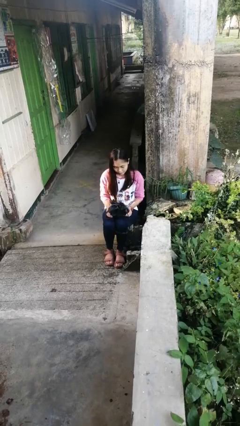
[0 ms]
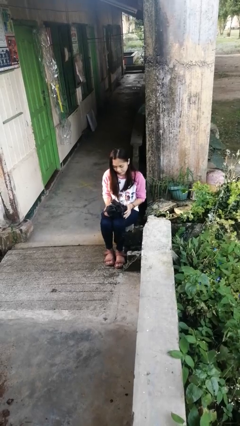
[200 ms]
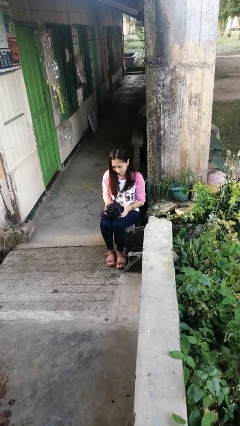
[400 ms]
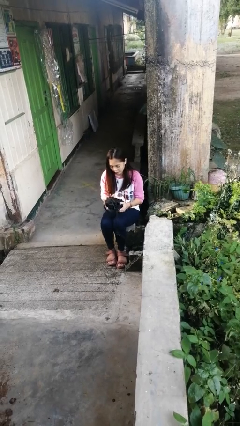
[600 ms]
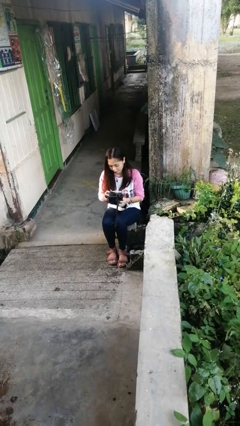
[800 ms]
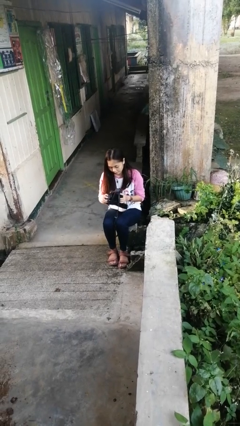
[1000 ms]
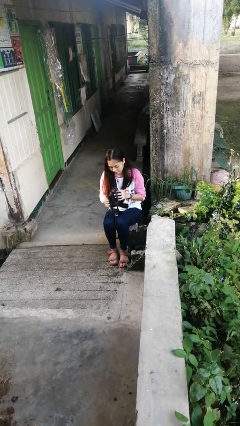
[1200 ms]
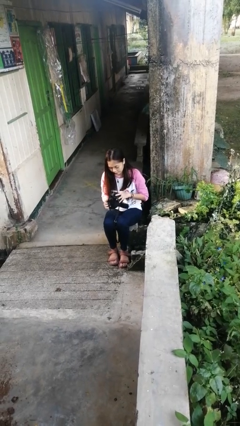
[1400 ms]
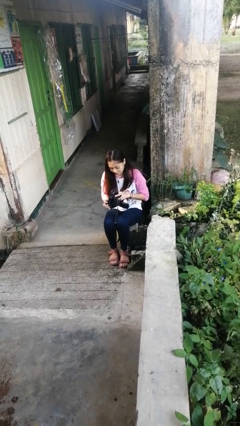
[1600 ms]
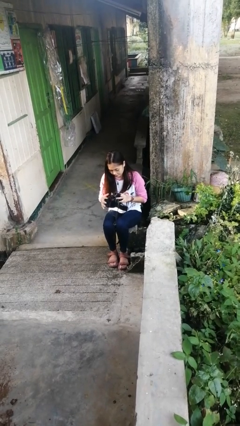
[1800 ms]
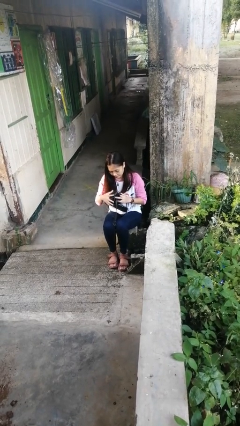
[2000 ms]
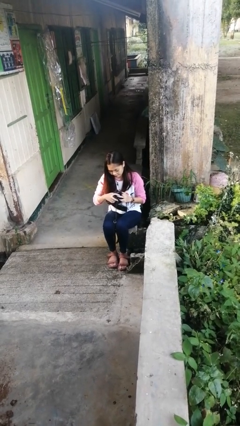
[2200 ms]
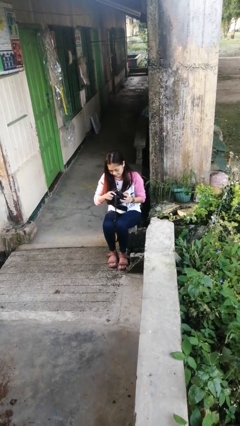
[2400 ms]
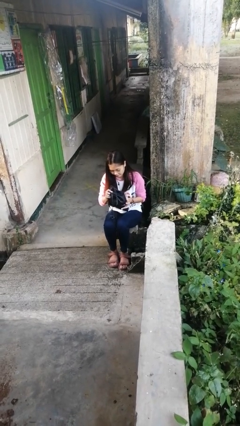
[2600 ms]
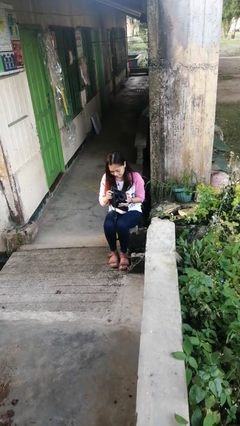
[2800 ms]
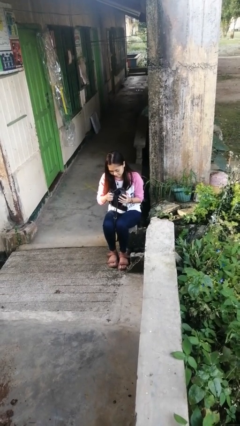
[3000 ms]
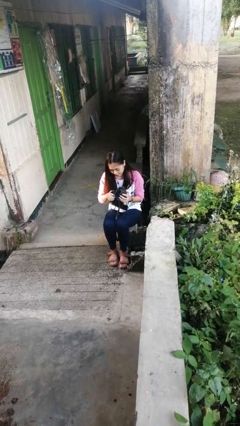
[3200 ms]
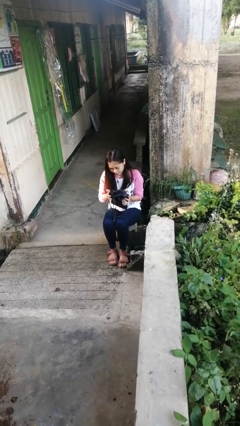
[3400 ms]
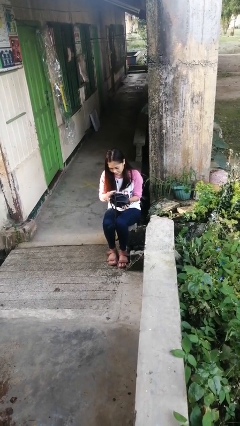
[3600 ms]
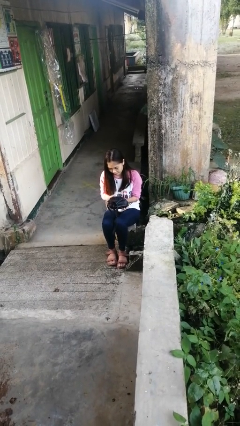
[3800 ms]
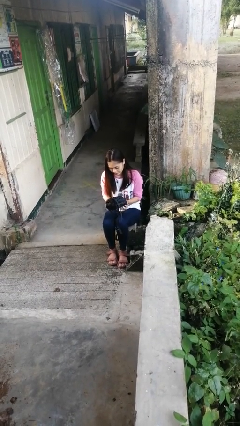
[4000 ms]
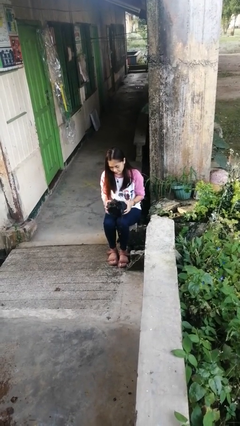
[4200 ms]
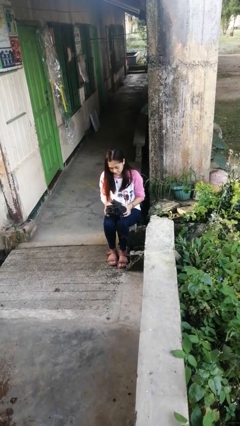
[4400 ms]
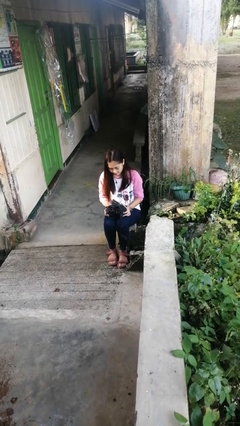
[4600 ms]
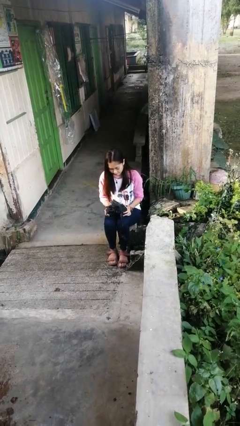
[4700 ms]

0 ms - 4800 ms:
person squeezes object

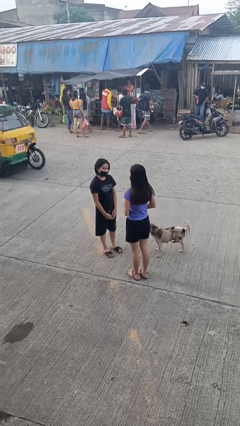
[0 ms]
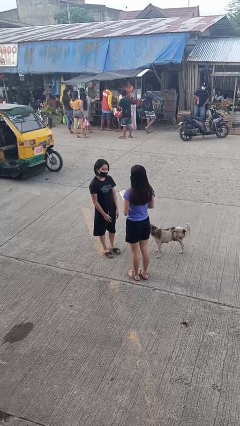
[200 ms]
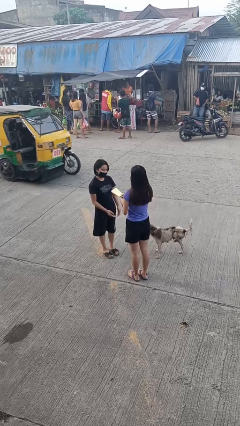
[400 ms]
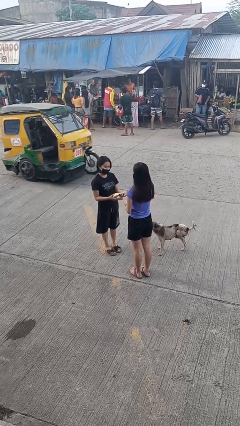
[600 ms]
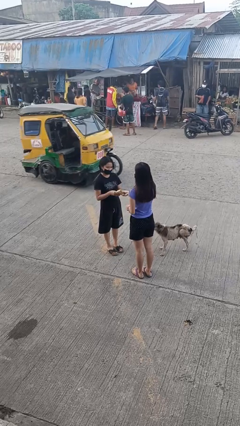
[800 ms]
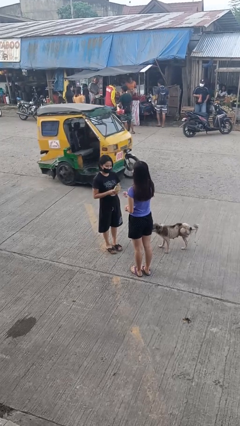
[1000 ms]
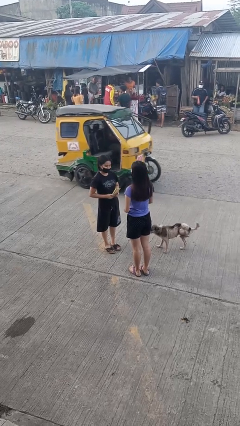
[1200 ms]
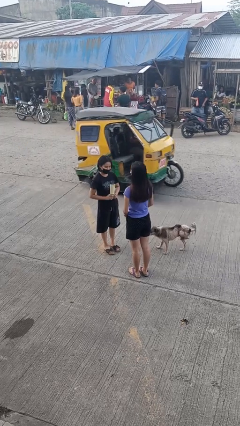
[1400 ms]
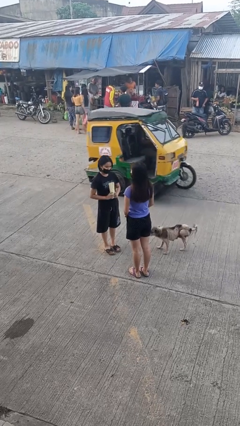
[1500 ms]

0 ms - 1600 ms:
person transfers object to person

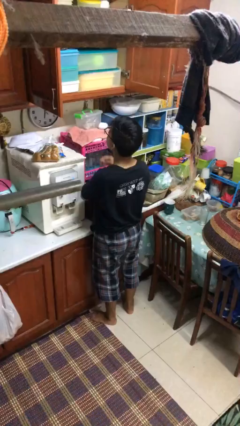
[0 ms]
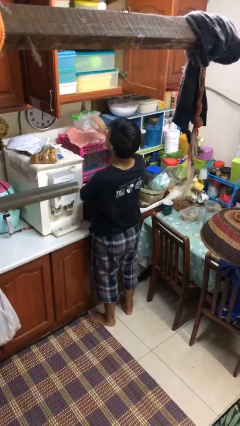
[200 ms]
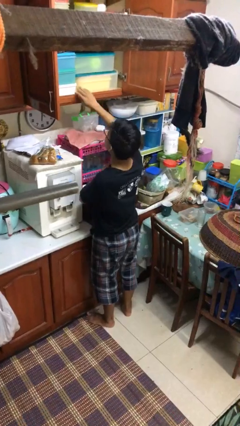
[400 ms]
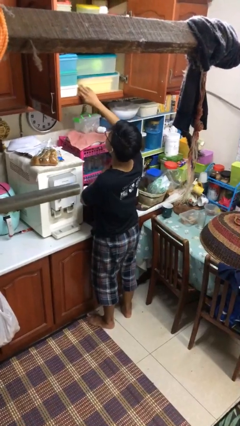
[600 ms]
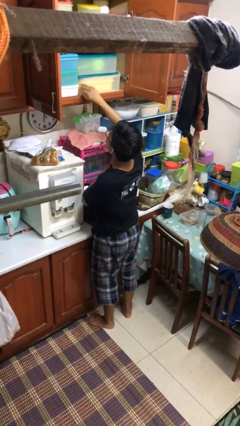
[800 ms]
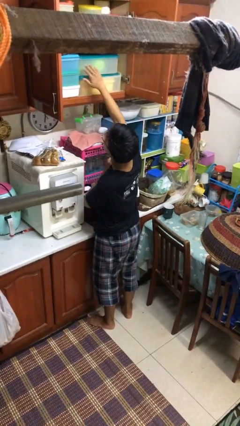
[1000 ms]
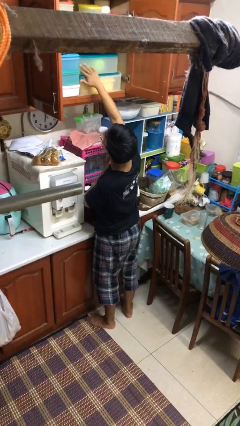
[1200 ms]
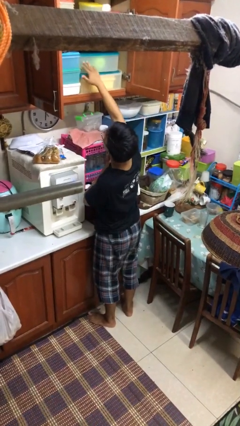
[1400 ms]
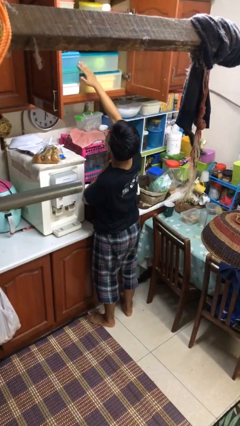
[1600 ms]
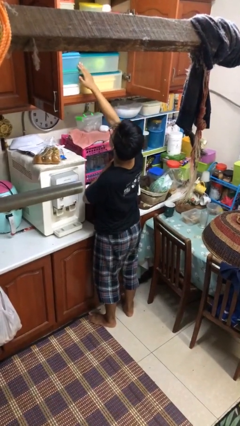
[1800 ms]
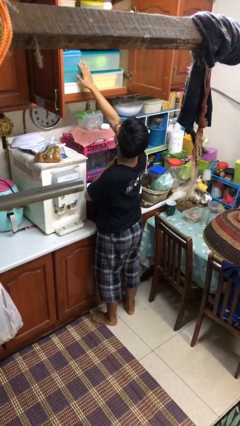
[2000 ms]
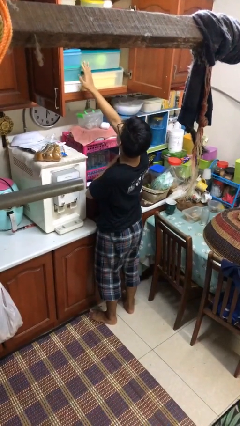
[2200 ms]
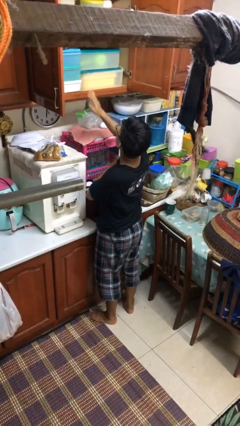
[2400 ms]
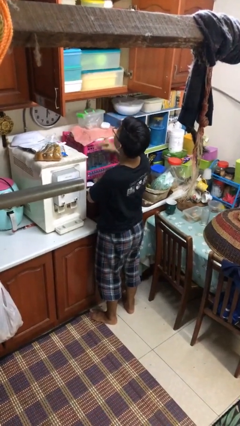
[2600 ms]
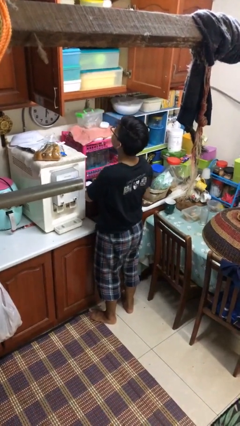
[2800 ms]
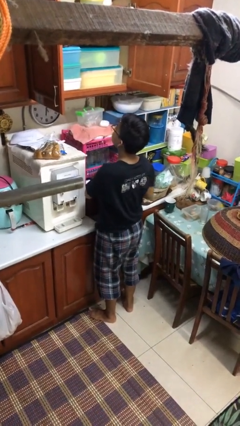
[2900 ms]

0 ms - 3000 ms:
person searches in kitchen drawer

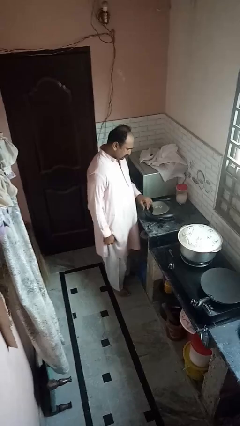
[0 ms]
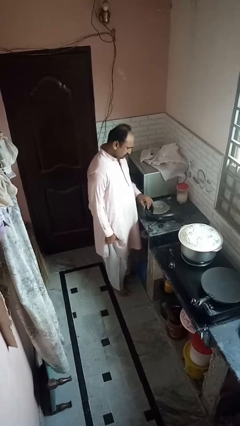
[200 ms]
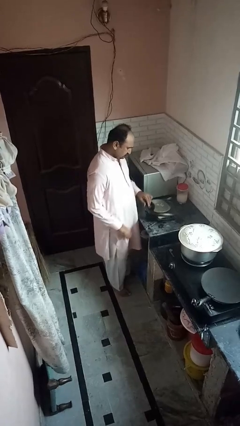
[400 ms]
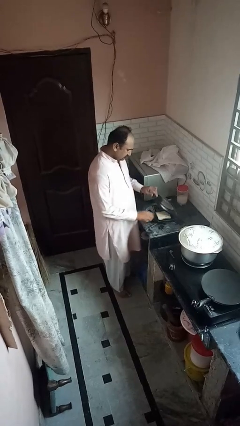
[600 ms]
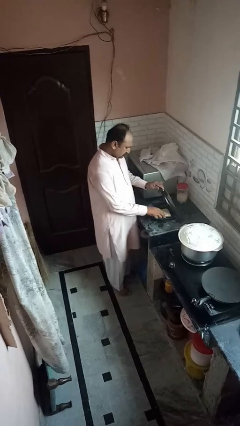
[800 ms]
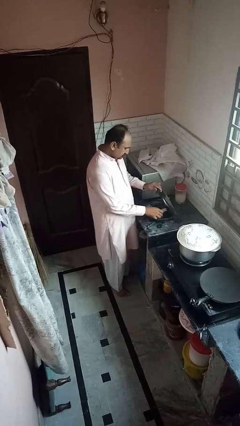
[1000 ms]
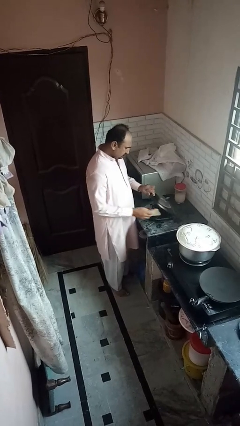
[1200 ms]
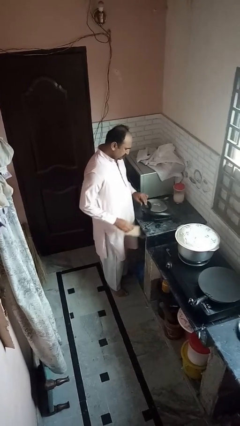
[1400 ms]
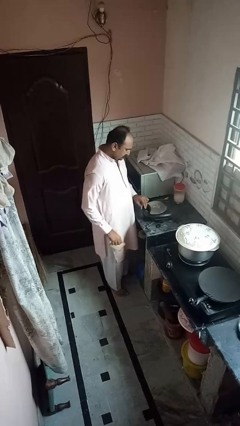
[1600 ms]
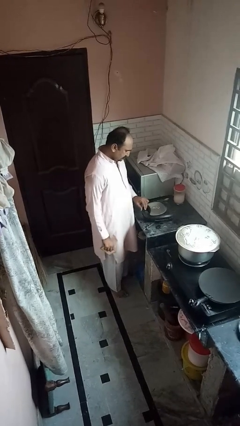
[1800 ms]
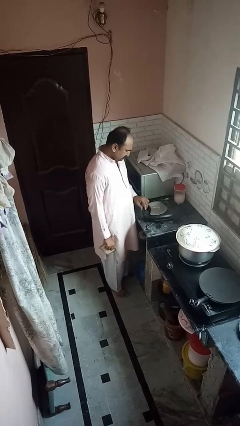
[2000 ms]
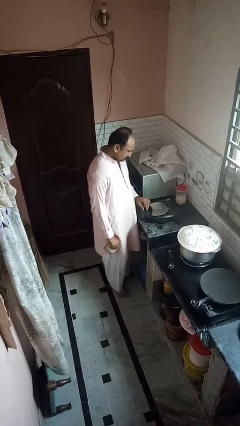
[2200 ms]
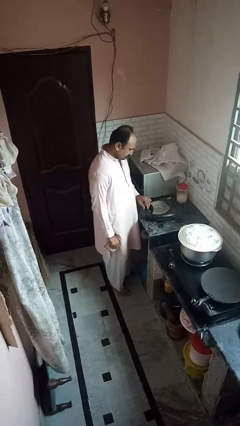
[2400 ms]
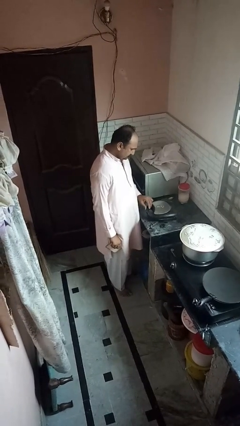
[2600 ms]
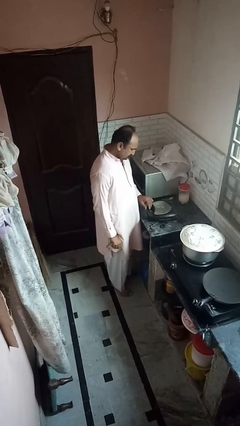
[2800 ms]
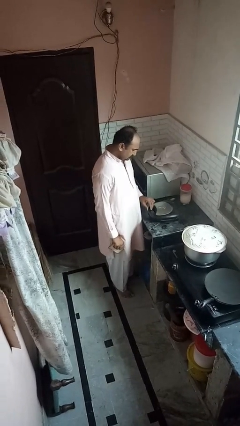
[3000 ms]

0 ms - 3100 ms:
person takes object from toaster

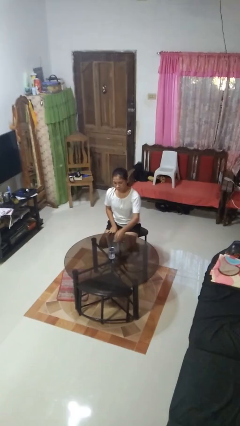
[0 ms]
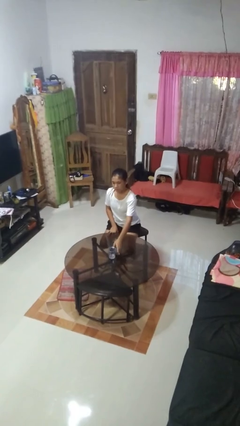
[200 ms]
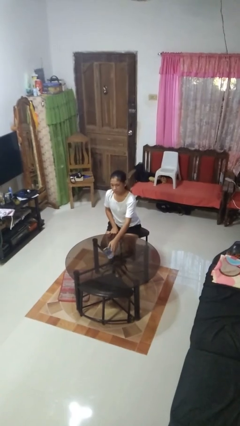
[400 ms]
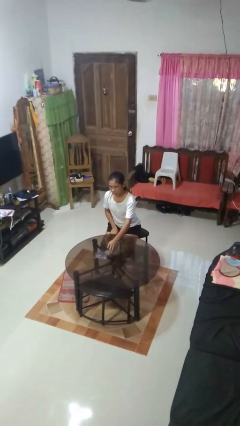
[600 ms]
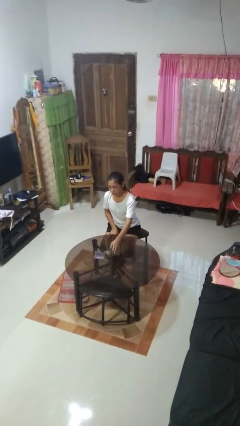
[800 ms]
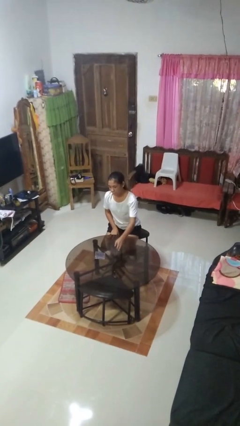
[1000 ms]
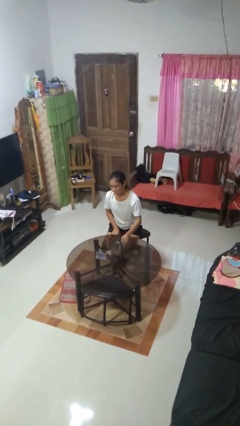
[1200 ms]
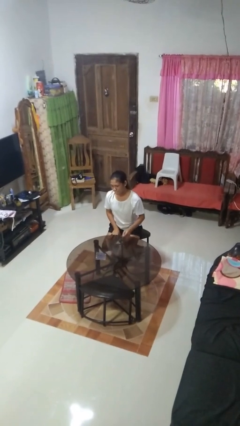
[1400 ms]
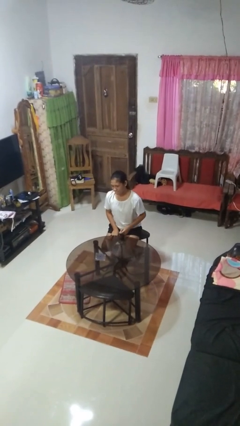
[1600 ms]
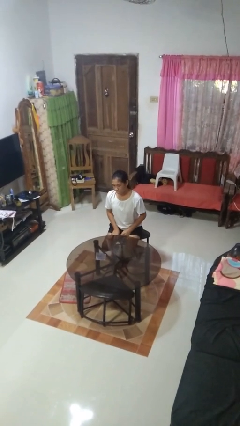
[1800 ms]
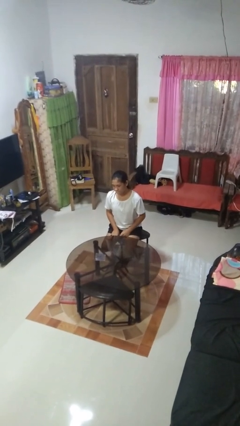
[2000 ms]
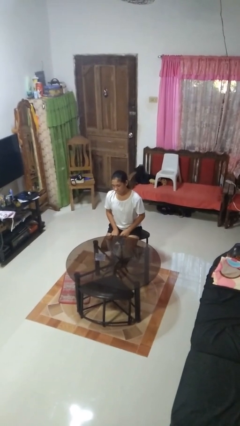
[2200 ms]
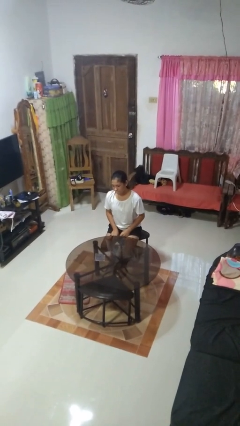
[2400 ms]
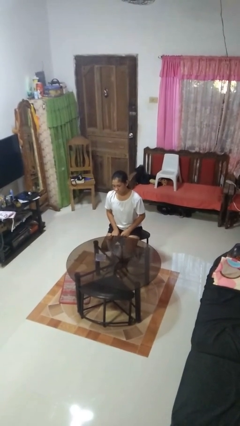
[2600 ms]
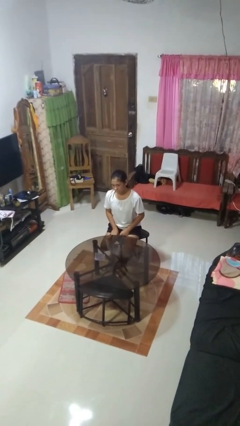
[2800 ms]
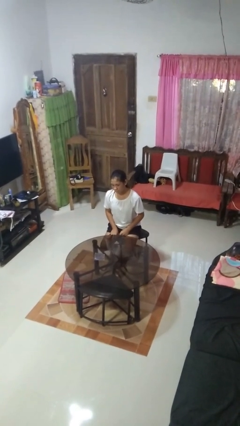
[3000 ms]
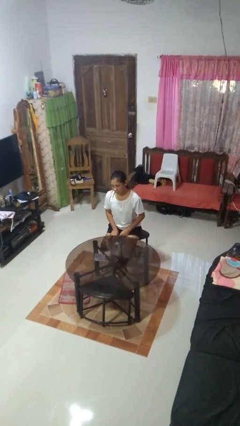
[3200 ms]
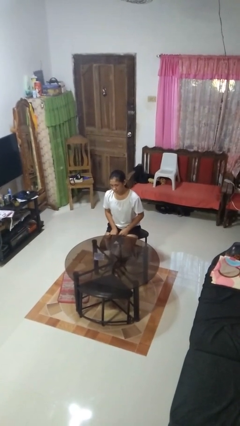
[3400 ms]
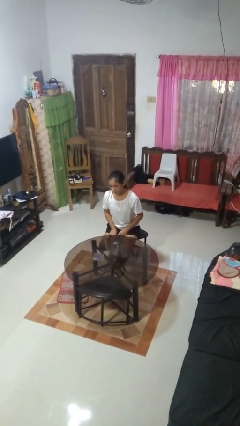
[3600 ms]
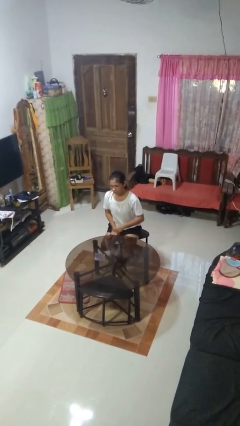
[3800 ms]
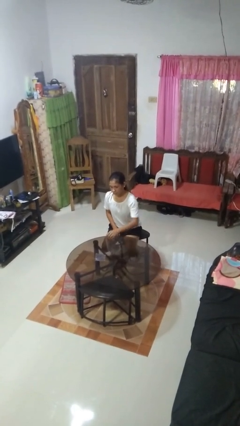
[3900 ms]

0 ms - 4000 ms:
person spills on table

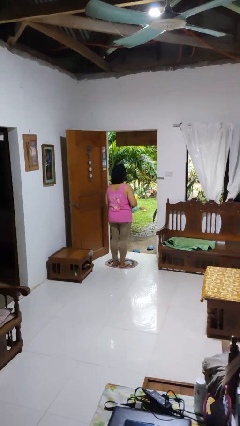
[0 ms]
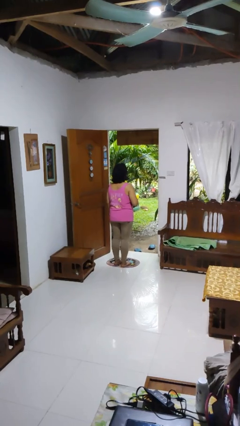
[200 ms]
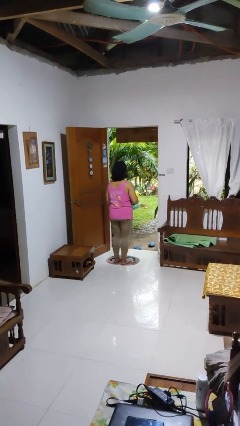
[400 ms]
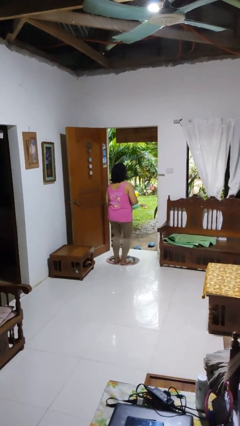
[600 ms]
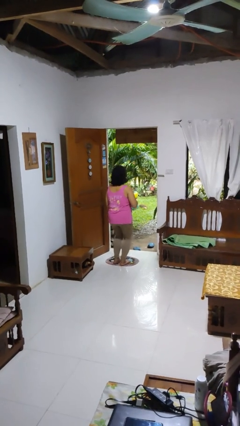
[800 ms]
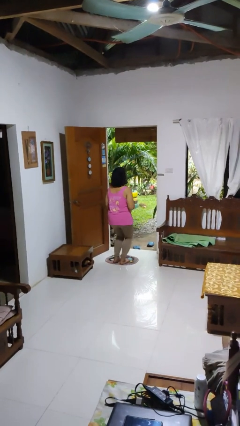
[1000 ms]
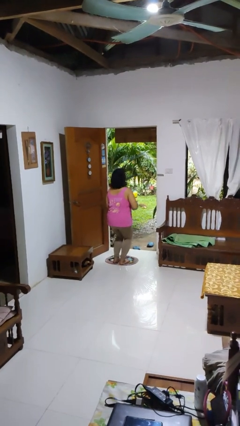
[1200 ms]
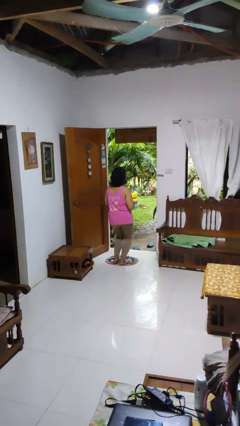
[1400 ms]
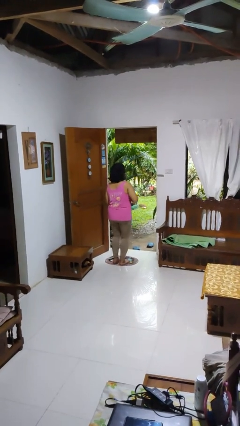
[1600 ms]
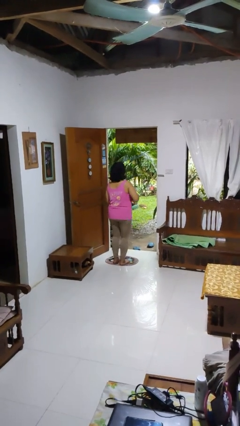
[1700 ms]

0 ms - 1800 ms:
person wiggles hips
